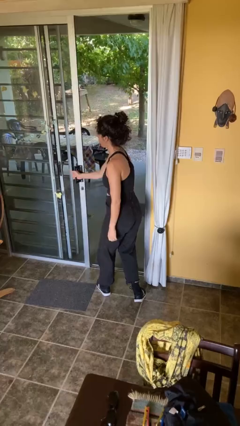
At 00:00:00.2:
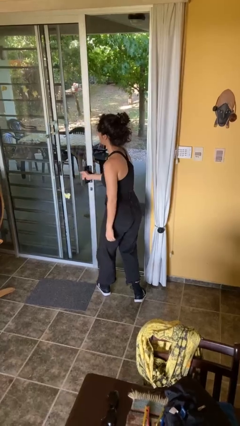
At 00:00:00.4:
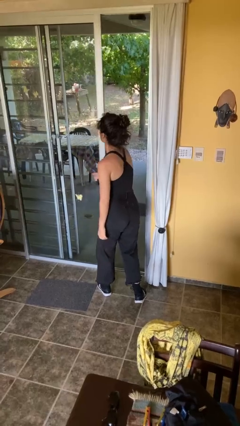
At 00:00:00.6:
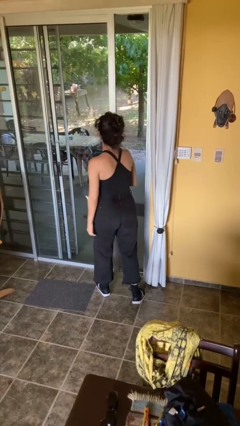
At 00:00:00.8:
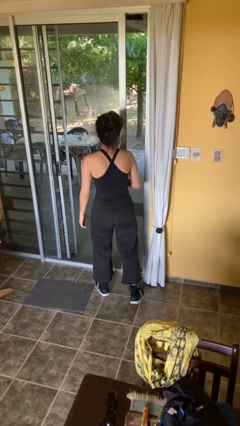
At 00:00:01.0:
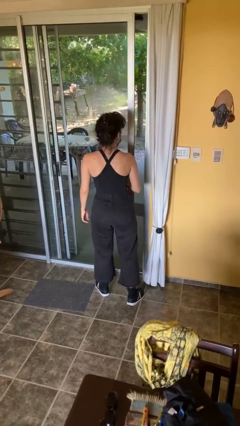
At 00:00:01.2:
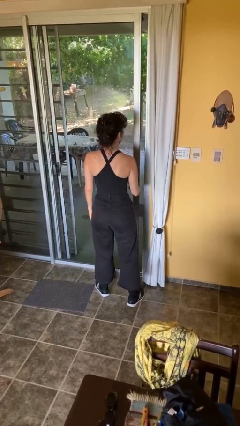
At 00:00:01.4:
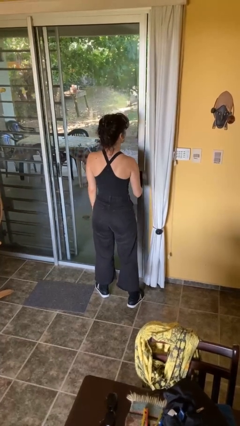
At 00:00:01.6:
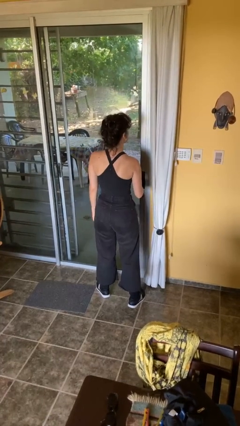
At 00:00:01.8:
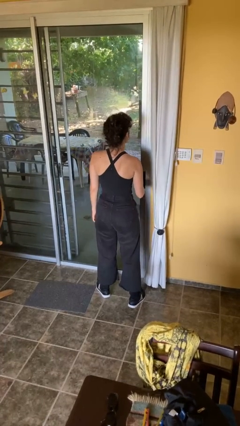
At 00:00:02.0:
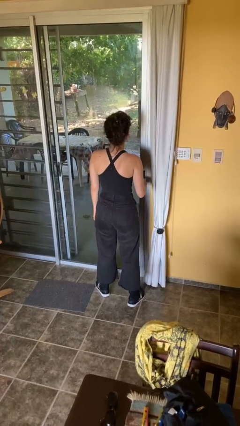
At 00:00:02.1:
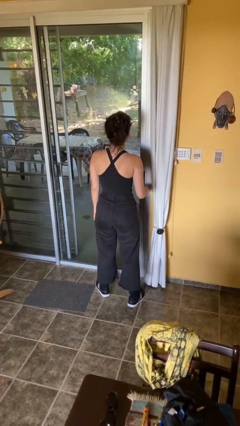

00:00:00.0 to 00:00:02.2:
person closes facility door

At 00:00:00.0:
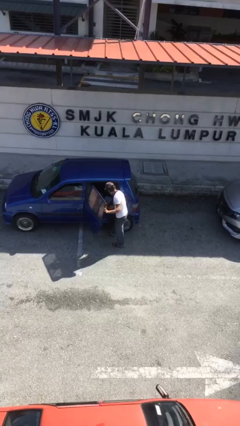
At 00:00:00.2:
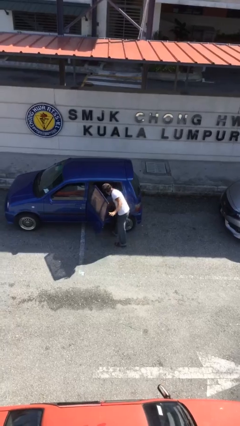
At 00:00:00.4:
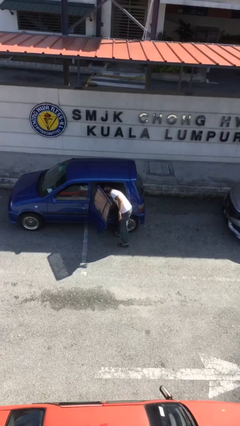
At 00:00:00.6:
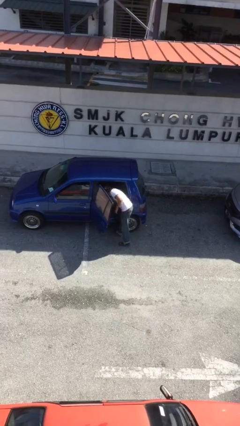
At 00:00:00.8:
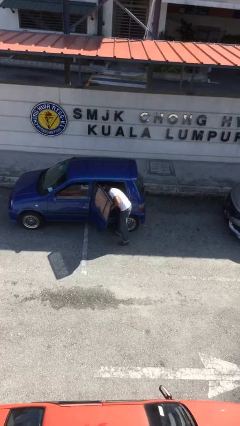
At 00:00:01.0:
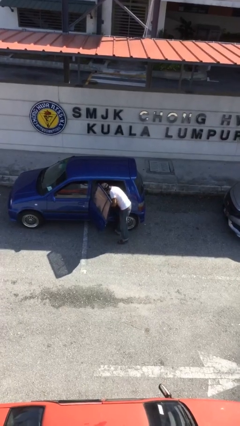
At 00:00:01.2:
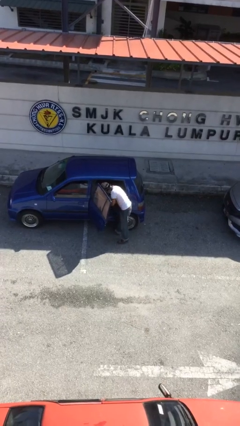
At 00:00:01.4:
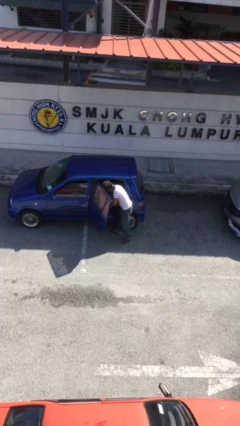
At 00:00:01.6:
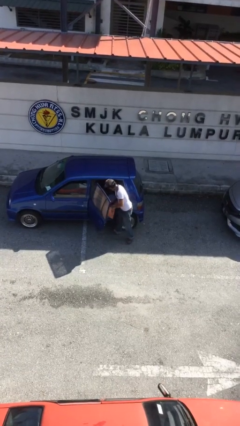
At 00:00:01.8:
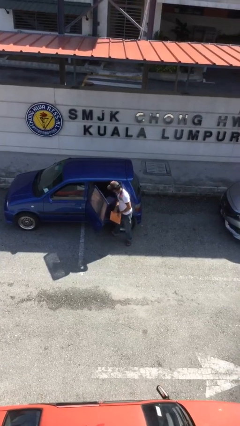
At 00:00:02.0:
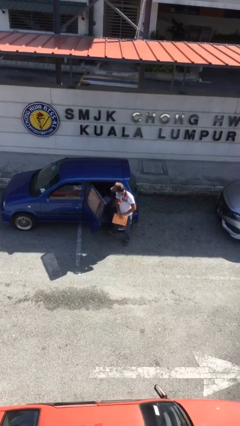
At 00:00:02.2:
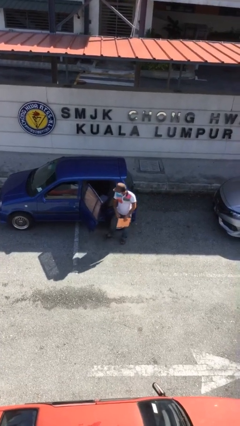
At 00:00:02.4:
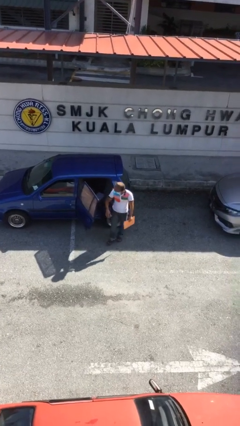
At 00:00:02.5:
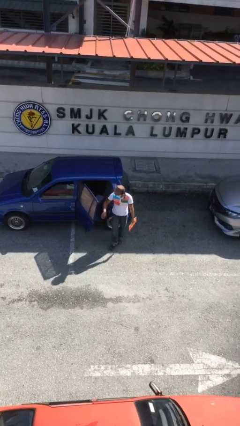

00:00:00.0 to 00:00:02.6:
person unloads car

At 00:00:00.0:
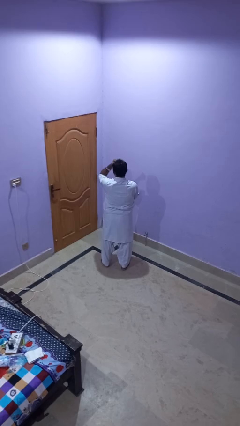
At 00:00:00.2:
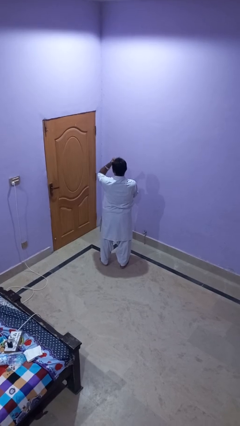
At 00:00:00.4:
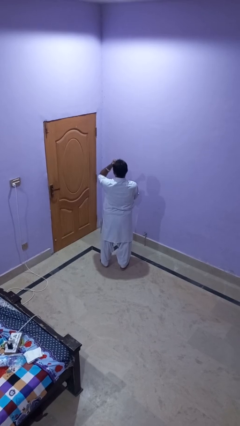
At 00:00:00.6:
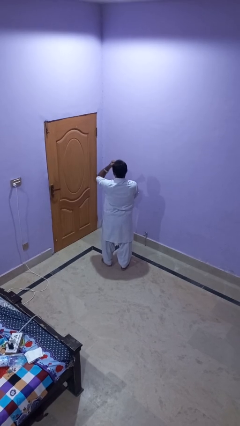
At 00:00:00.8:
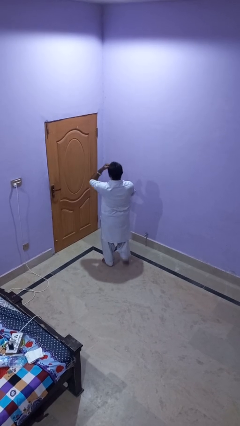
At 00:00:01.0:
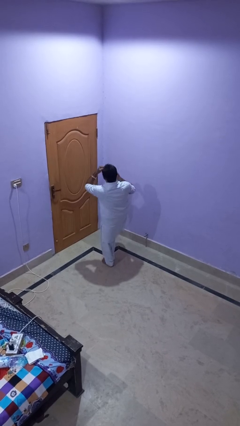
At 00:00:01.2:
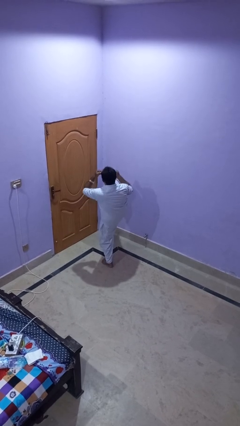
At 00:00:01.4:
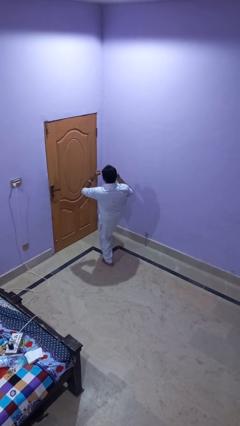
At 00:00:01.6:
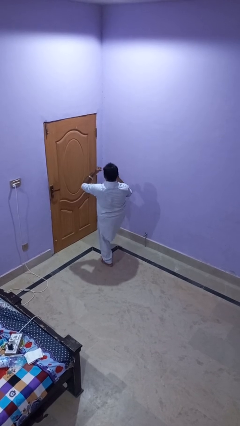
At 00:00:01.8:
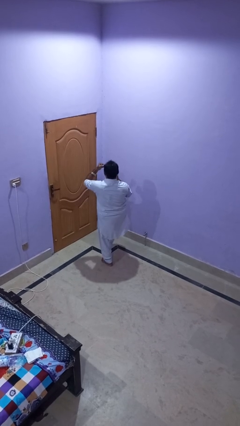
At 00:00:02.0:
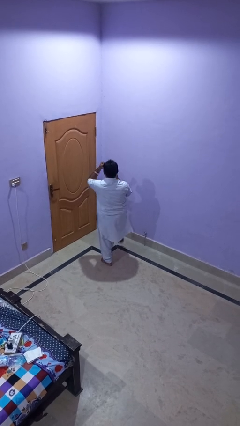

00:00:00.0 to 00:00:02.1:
person karate kicks

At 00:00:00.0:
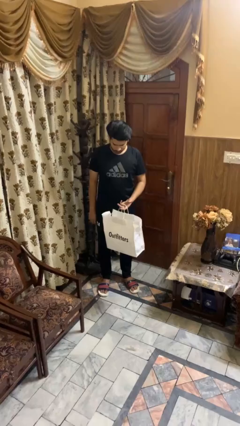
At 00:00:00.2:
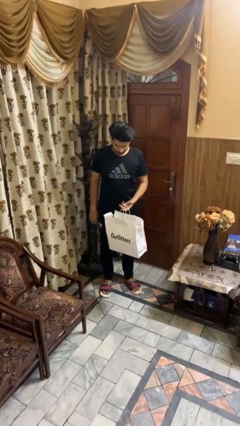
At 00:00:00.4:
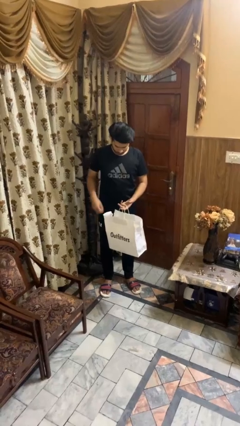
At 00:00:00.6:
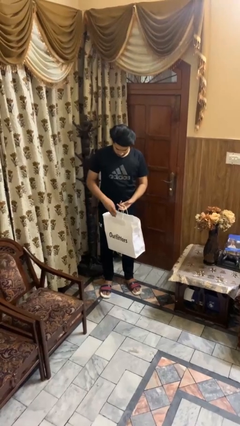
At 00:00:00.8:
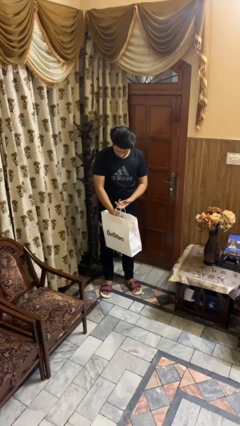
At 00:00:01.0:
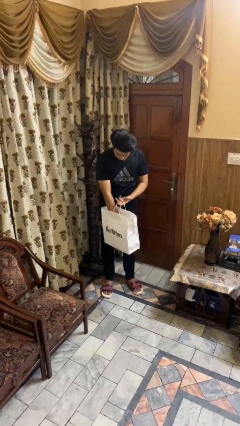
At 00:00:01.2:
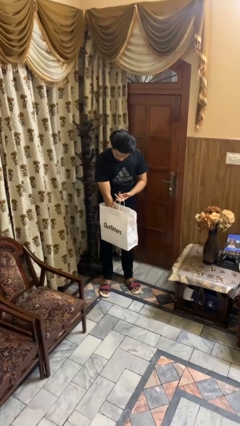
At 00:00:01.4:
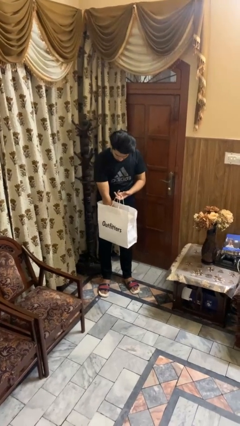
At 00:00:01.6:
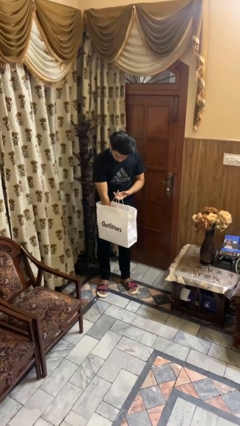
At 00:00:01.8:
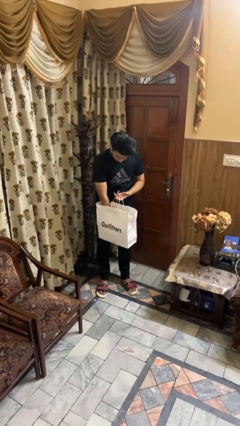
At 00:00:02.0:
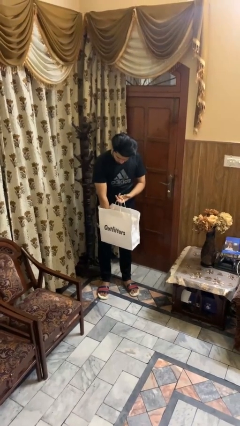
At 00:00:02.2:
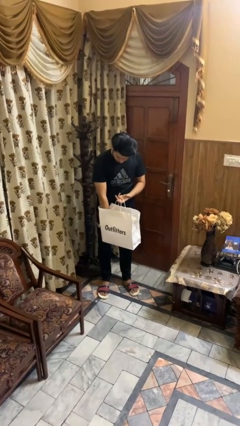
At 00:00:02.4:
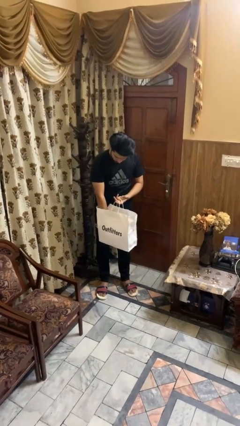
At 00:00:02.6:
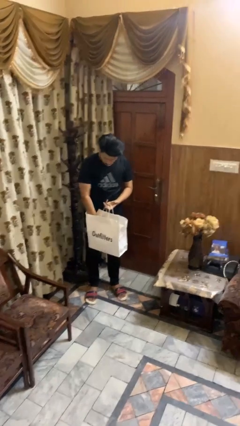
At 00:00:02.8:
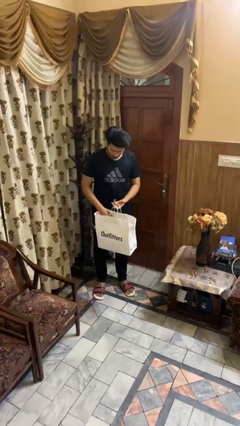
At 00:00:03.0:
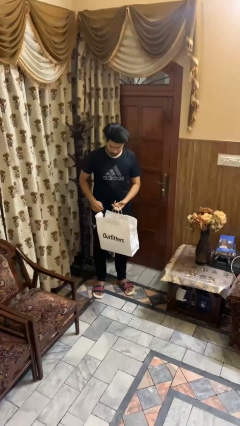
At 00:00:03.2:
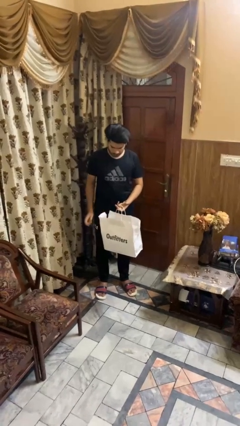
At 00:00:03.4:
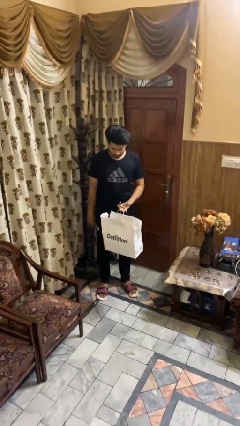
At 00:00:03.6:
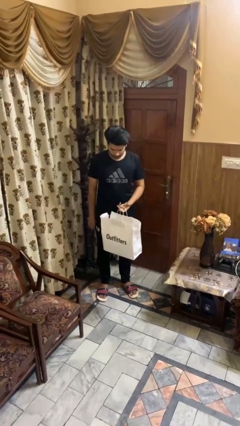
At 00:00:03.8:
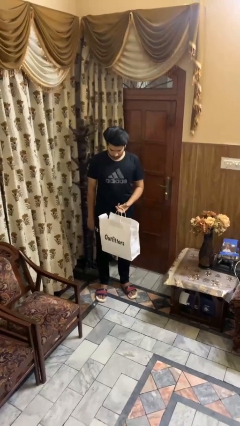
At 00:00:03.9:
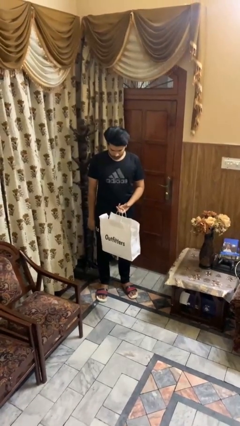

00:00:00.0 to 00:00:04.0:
person searches in bag

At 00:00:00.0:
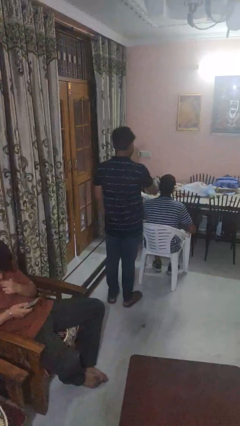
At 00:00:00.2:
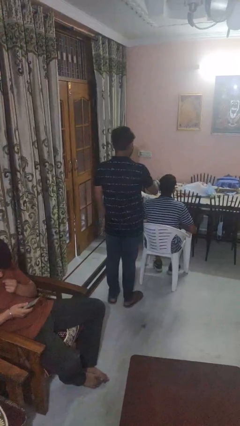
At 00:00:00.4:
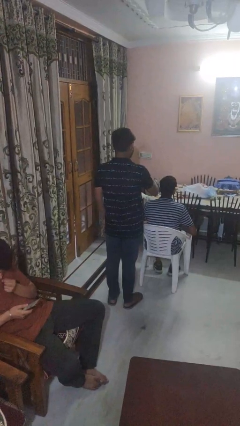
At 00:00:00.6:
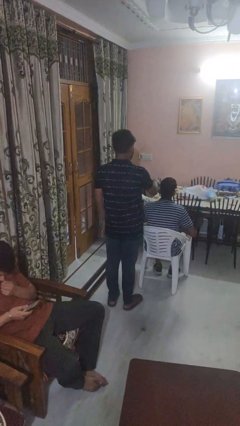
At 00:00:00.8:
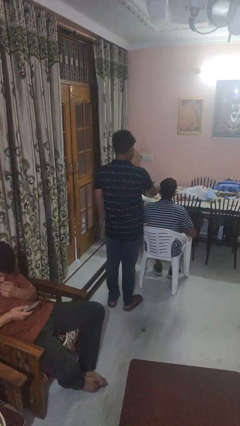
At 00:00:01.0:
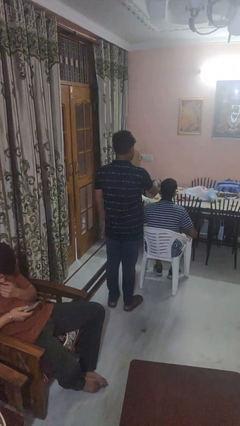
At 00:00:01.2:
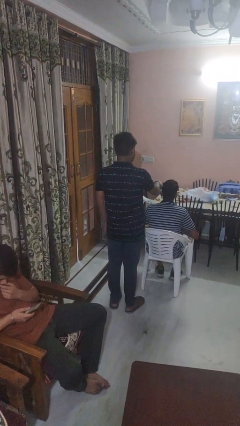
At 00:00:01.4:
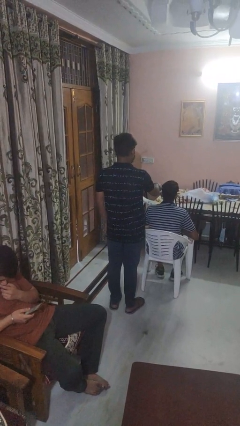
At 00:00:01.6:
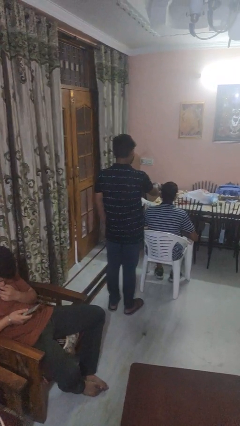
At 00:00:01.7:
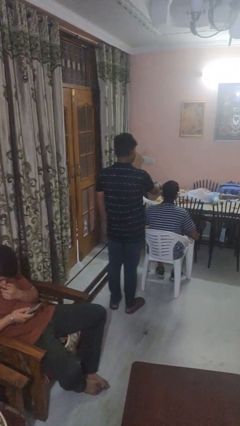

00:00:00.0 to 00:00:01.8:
person brushes hair of person

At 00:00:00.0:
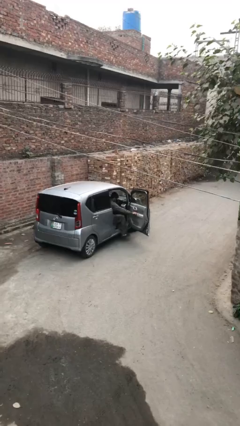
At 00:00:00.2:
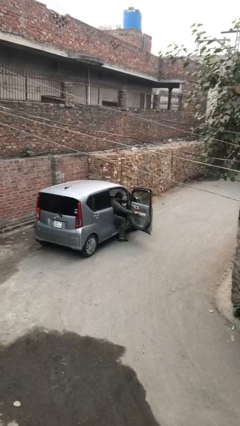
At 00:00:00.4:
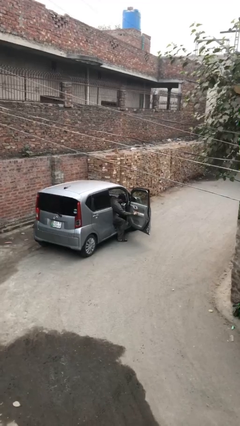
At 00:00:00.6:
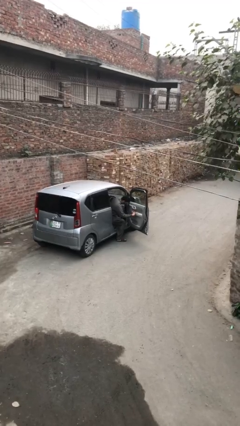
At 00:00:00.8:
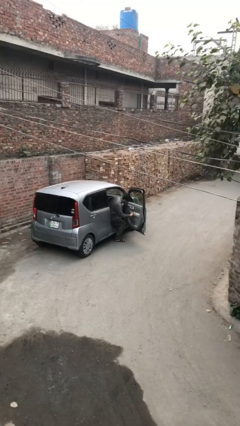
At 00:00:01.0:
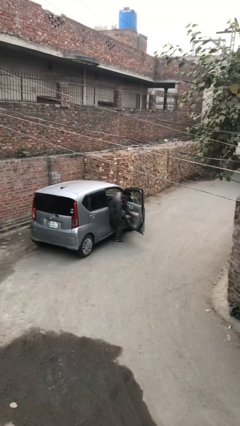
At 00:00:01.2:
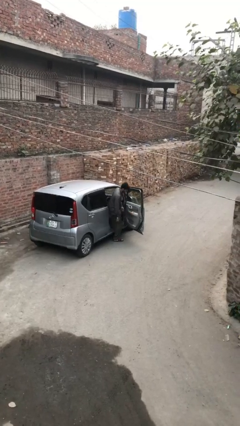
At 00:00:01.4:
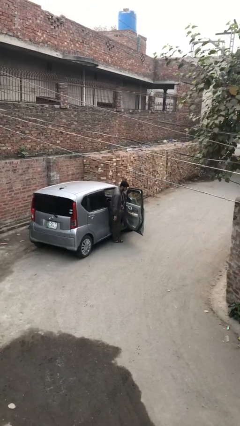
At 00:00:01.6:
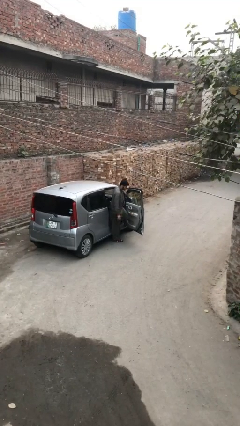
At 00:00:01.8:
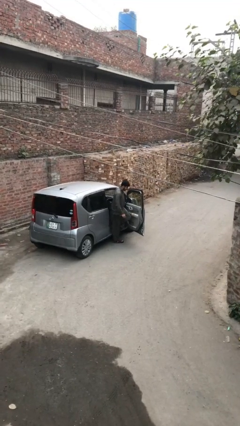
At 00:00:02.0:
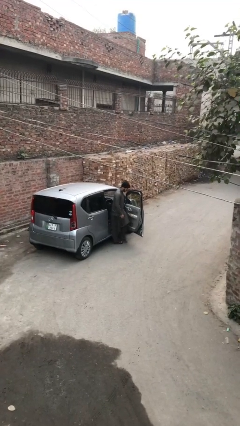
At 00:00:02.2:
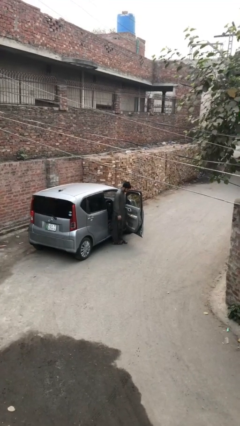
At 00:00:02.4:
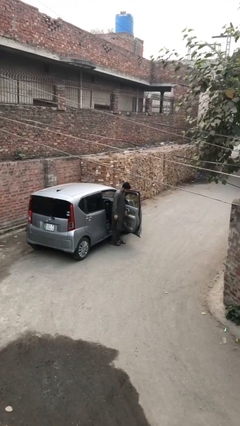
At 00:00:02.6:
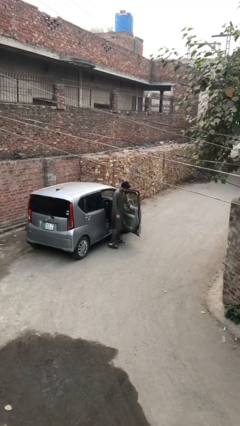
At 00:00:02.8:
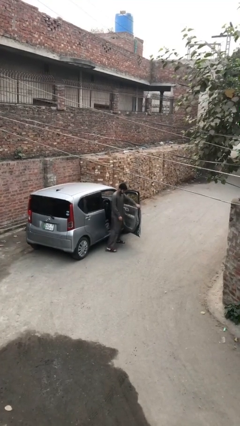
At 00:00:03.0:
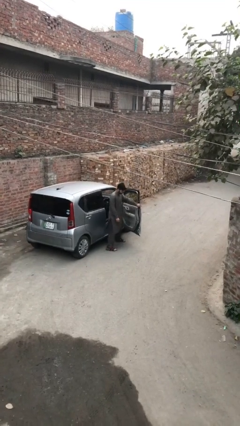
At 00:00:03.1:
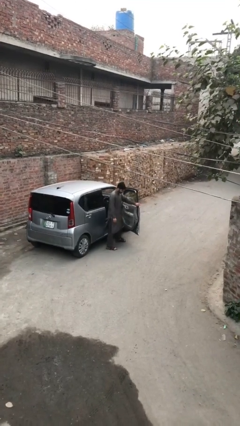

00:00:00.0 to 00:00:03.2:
person exits car

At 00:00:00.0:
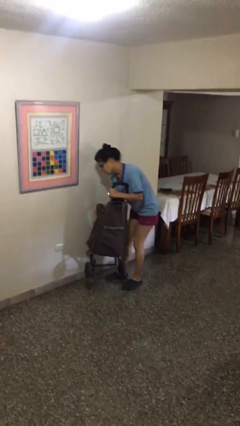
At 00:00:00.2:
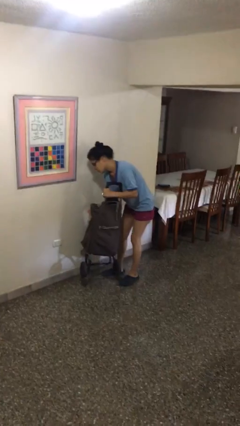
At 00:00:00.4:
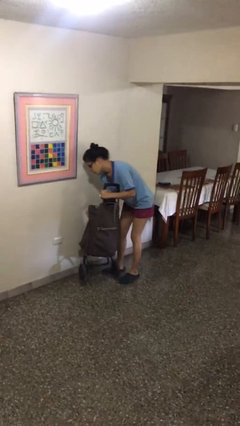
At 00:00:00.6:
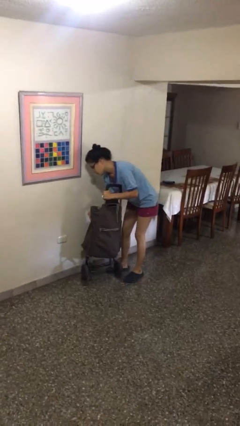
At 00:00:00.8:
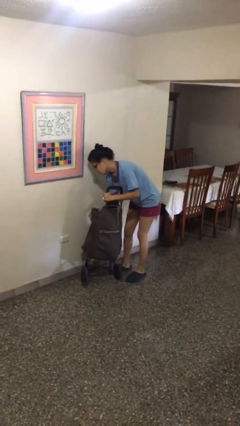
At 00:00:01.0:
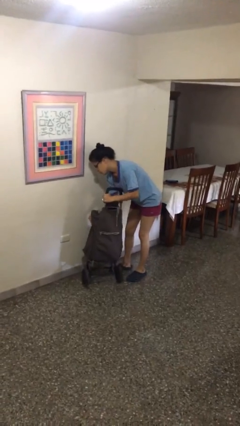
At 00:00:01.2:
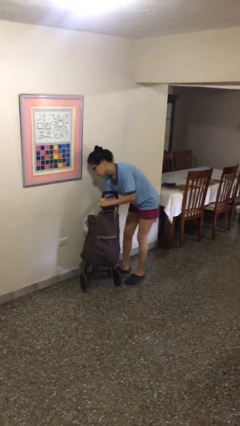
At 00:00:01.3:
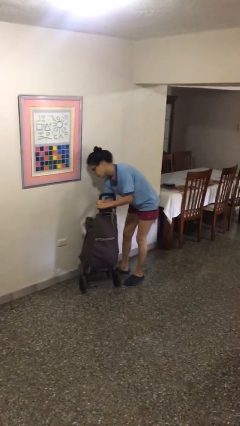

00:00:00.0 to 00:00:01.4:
person puts down object on floor
